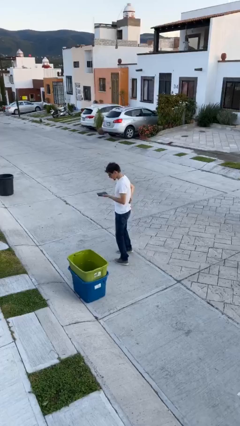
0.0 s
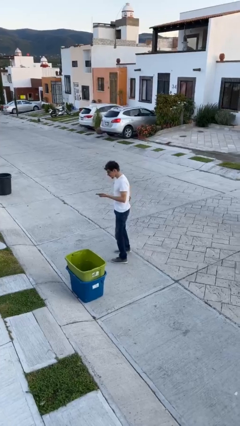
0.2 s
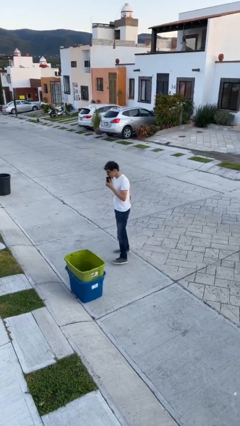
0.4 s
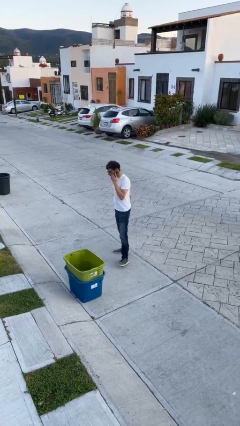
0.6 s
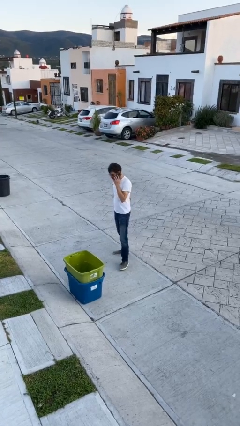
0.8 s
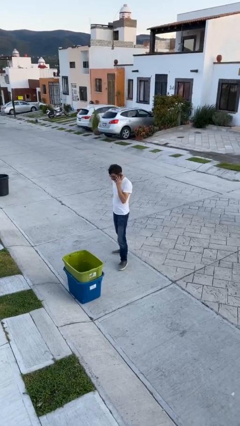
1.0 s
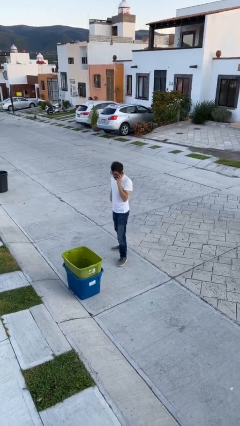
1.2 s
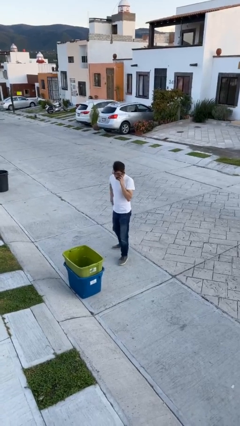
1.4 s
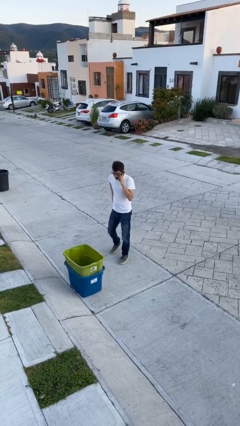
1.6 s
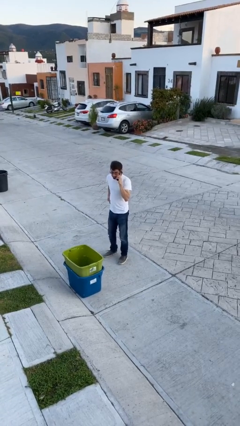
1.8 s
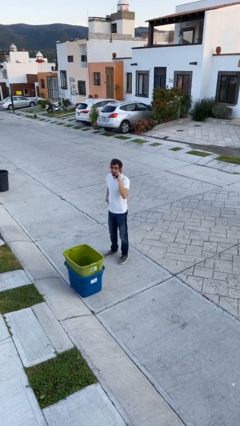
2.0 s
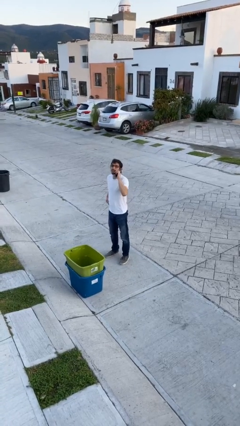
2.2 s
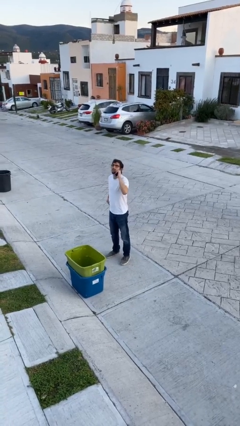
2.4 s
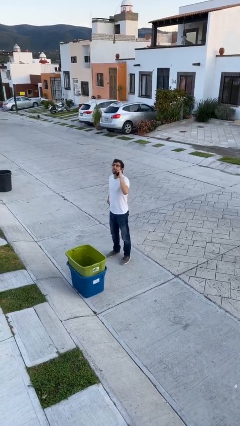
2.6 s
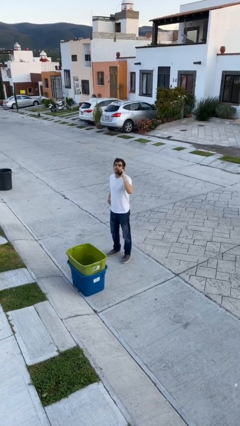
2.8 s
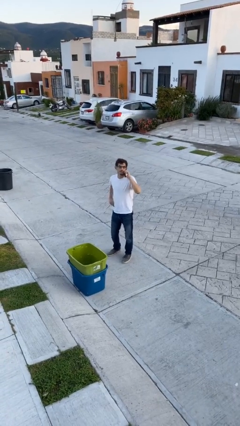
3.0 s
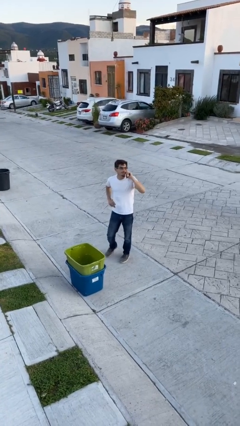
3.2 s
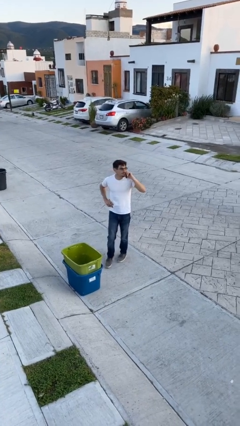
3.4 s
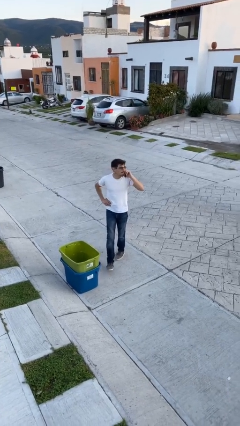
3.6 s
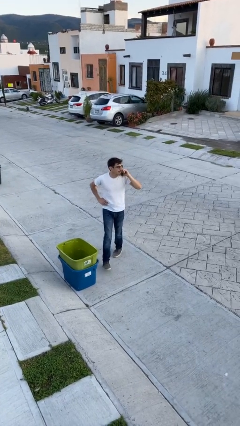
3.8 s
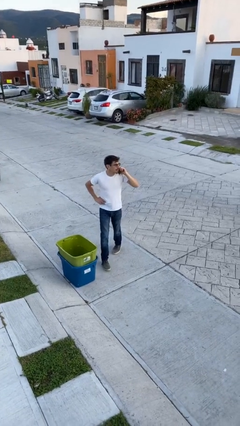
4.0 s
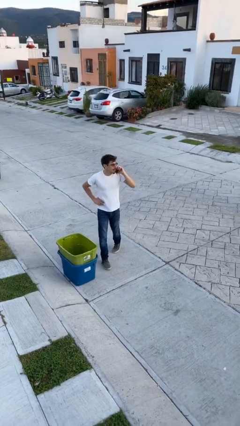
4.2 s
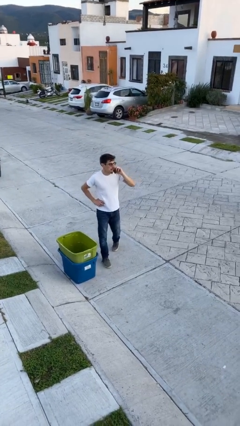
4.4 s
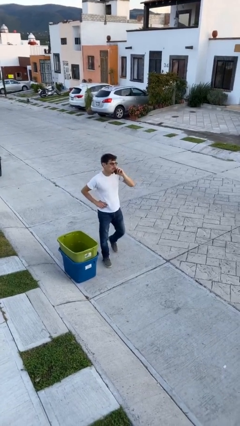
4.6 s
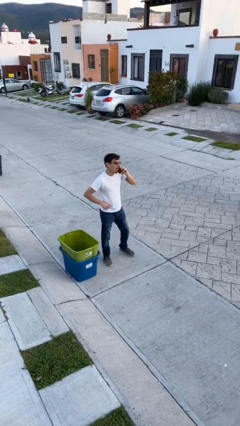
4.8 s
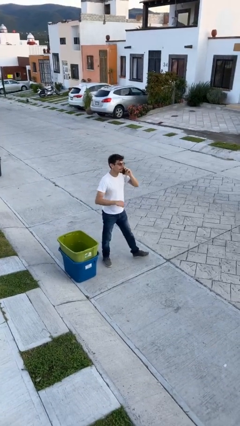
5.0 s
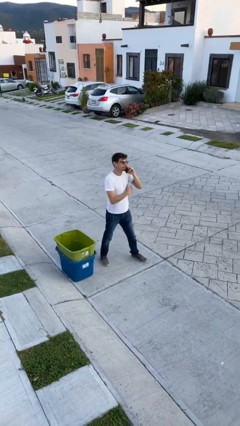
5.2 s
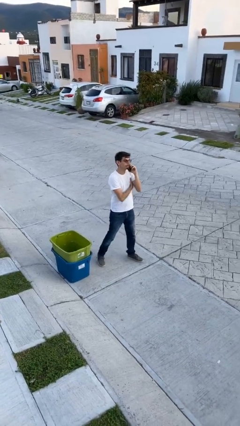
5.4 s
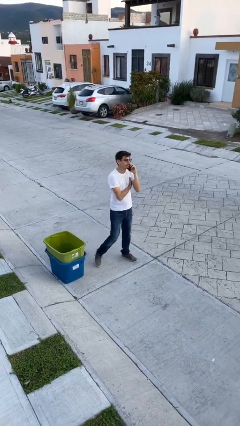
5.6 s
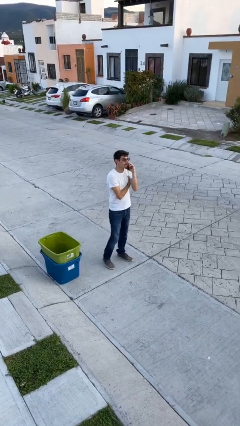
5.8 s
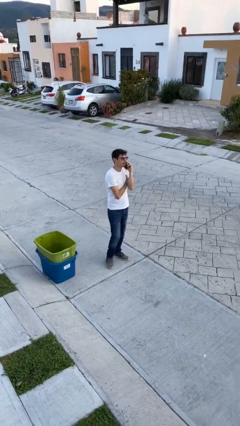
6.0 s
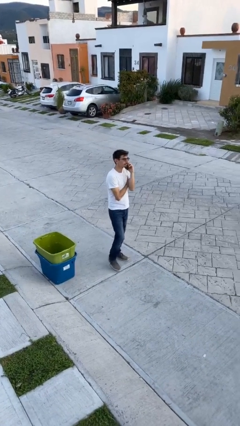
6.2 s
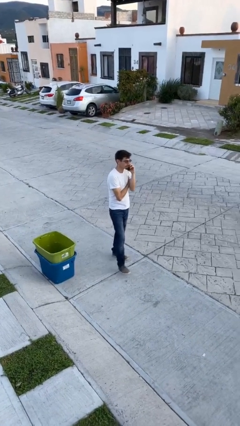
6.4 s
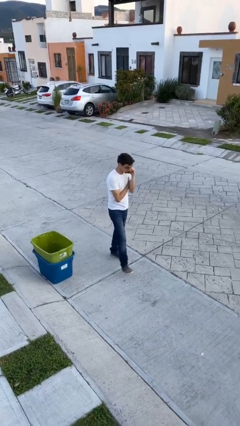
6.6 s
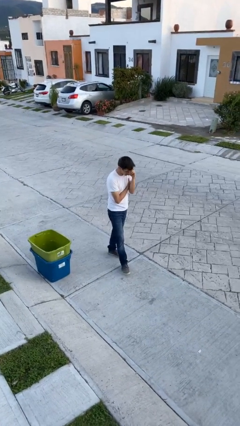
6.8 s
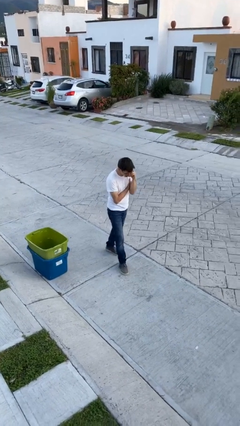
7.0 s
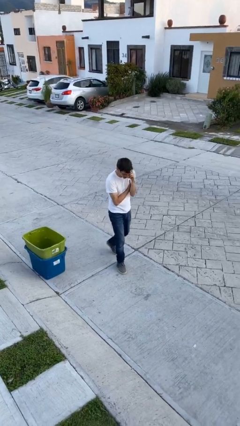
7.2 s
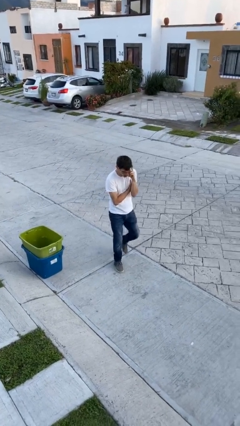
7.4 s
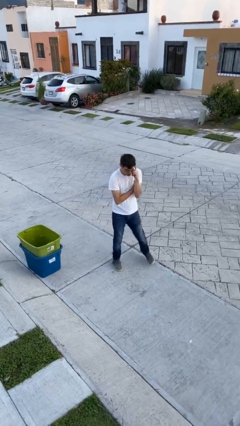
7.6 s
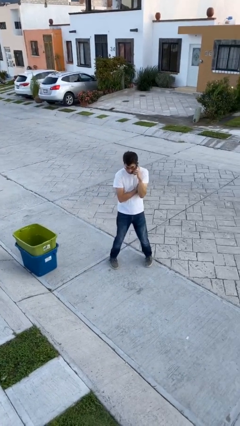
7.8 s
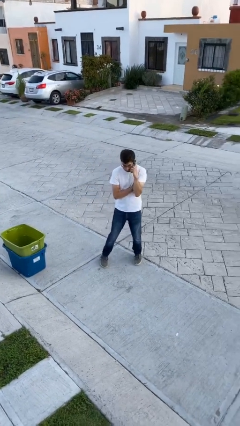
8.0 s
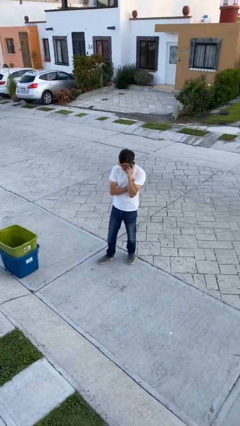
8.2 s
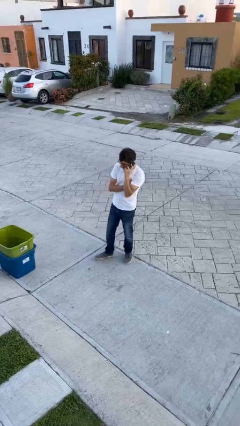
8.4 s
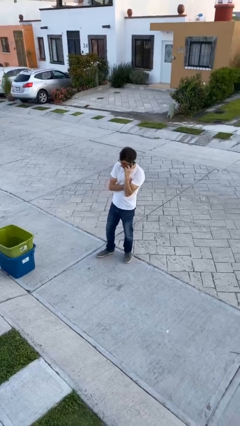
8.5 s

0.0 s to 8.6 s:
person talks on phone

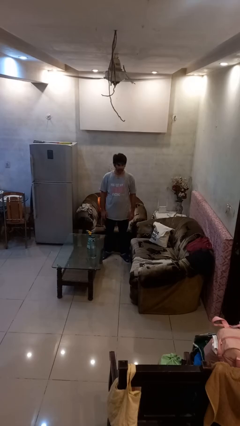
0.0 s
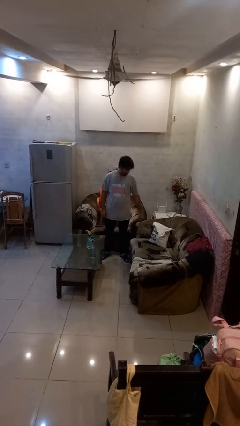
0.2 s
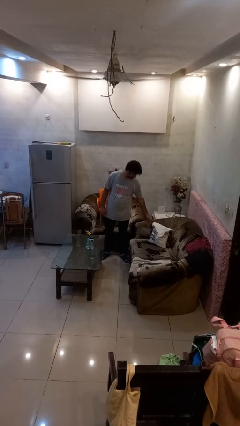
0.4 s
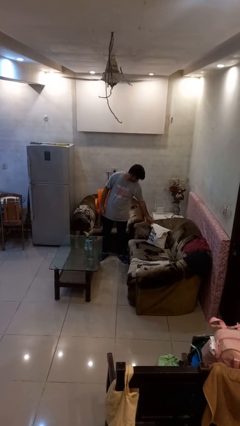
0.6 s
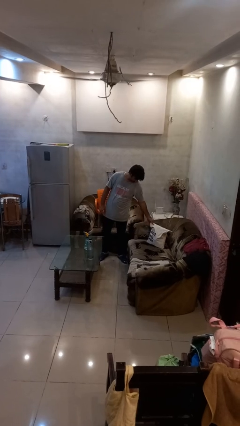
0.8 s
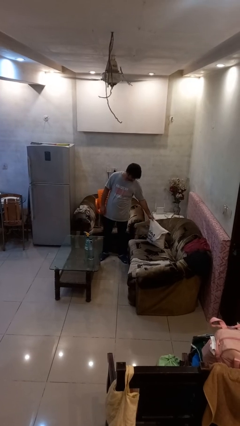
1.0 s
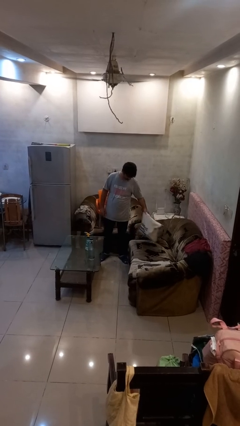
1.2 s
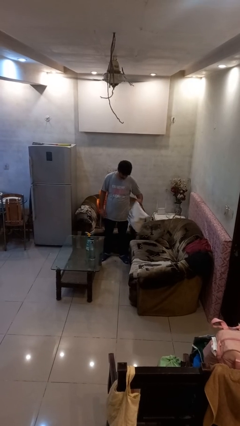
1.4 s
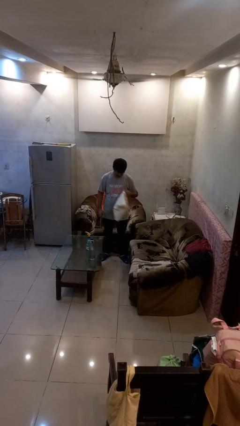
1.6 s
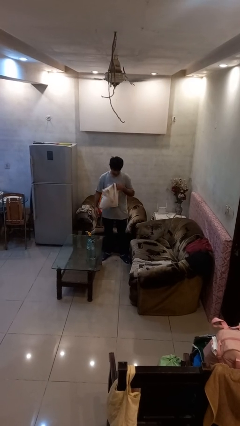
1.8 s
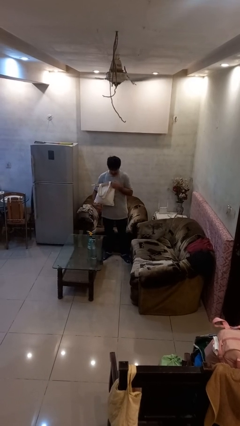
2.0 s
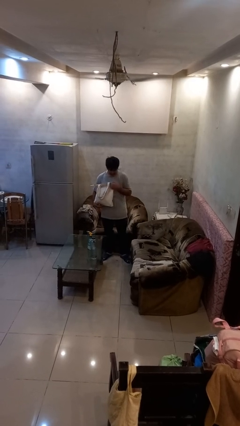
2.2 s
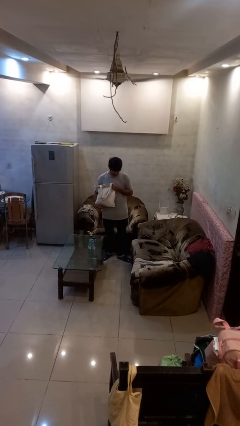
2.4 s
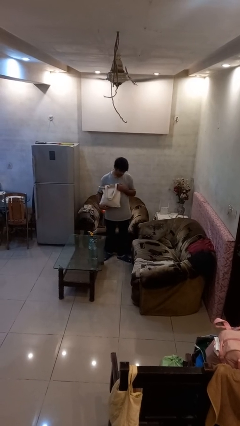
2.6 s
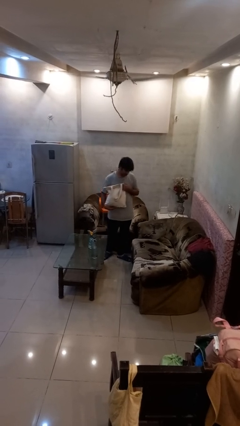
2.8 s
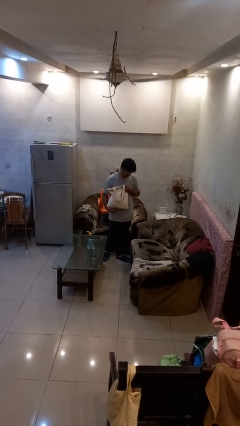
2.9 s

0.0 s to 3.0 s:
person picks up object from couch

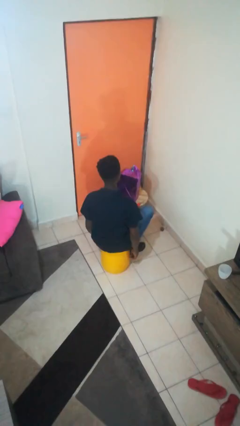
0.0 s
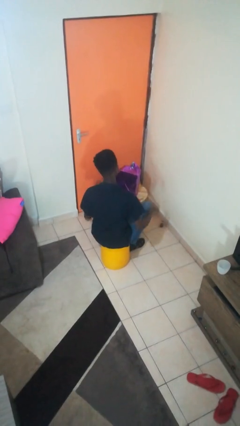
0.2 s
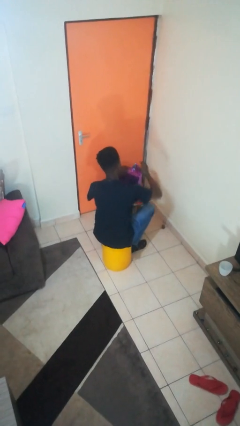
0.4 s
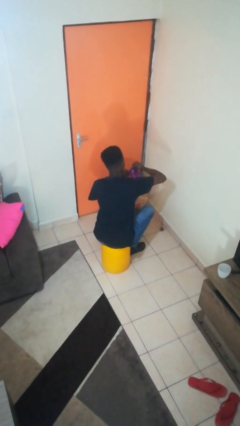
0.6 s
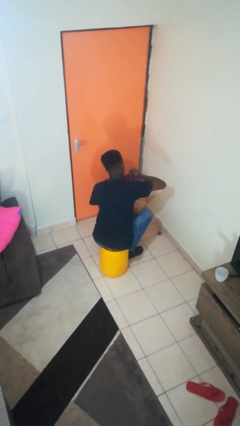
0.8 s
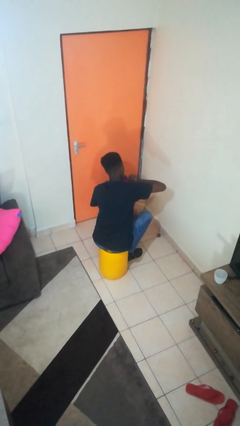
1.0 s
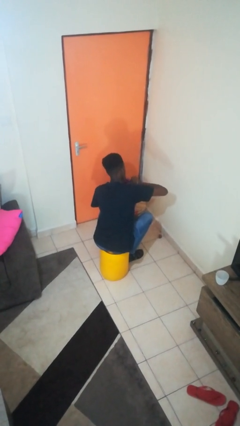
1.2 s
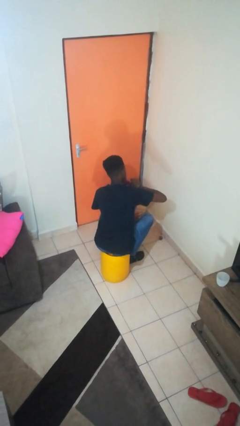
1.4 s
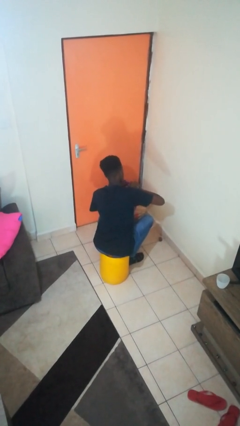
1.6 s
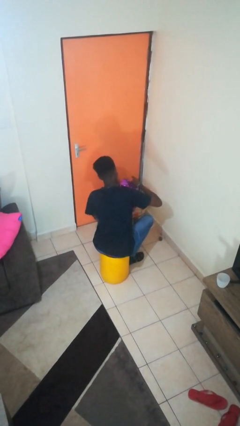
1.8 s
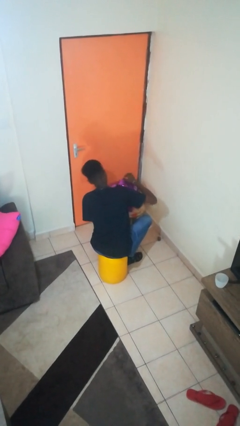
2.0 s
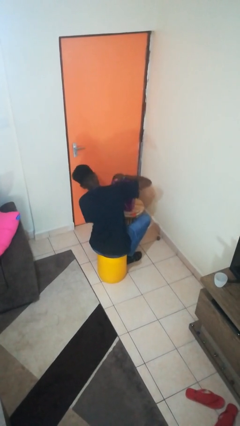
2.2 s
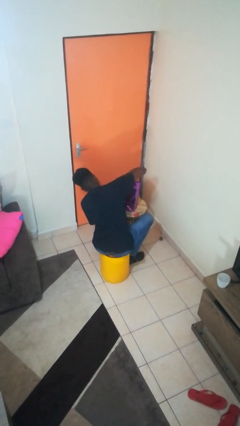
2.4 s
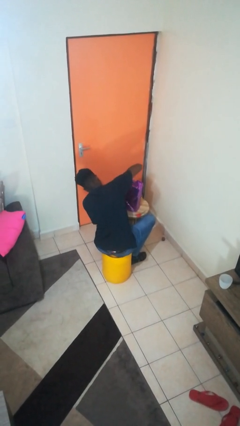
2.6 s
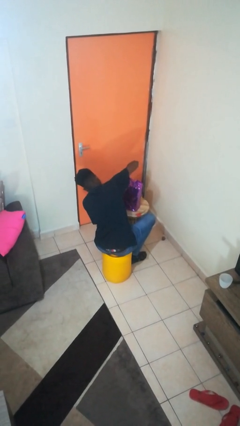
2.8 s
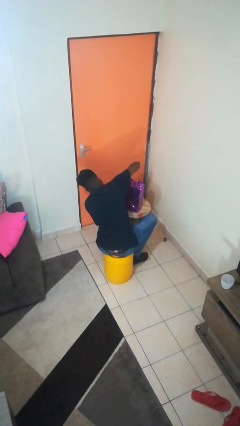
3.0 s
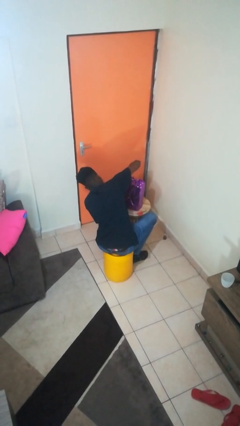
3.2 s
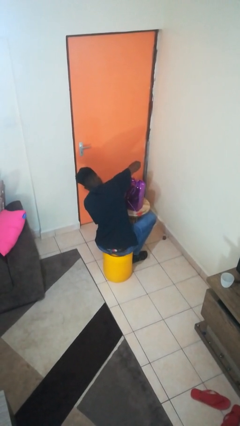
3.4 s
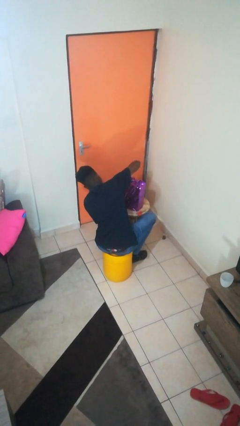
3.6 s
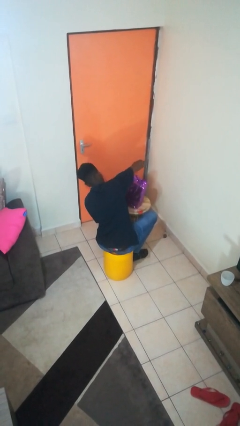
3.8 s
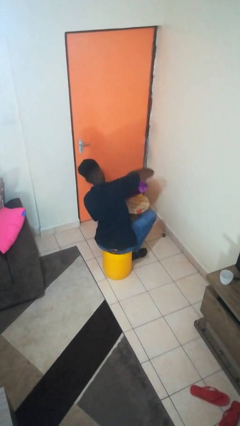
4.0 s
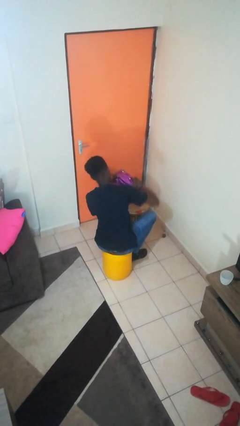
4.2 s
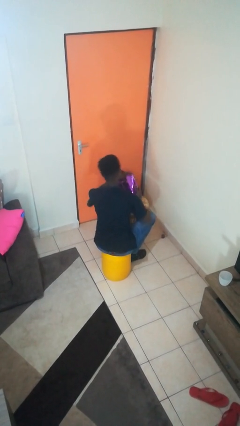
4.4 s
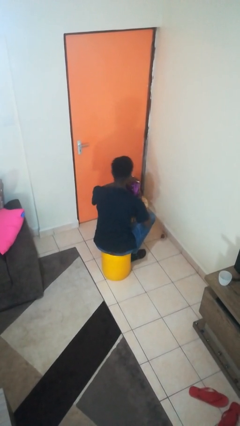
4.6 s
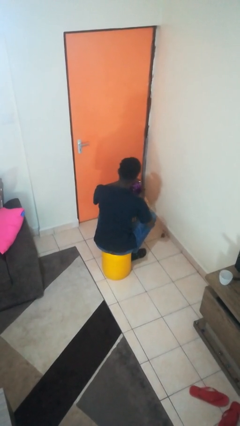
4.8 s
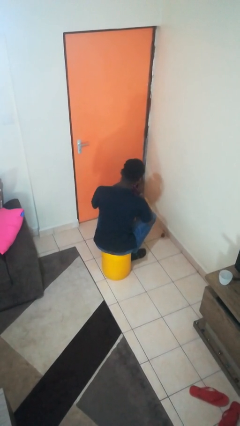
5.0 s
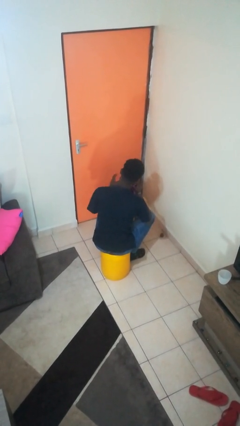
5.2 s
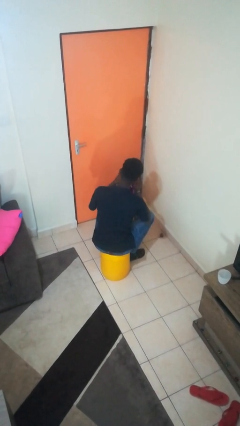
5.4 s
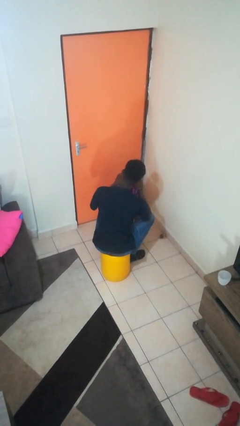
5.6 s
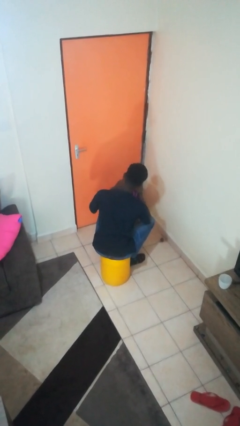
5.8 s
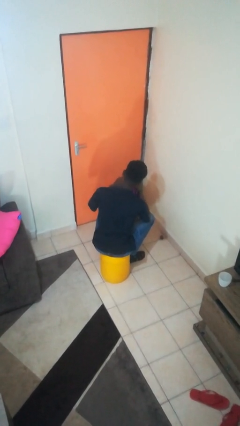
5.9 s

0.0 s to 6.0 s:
person wraps box

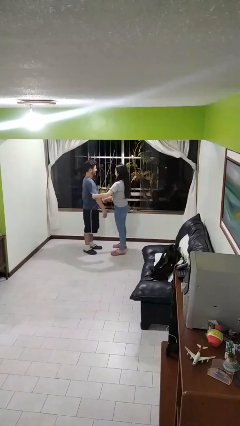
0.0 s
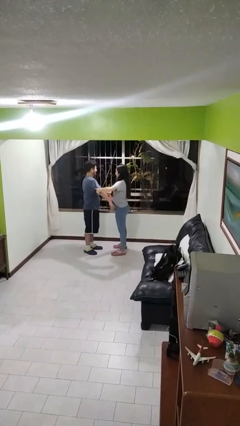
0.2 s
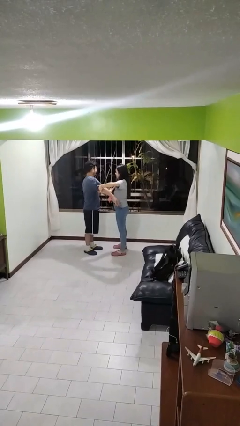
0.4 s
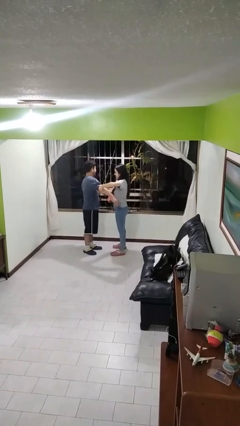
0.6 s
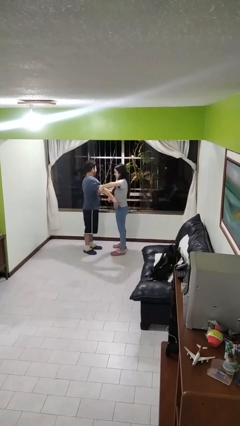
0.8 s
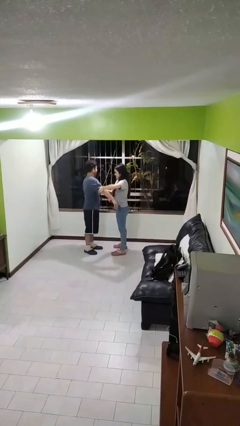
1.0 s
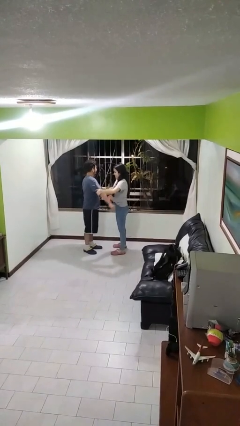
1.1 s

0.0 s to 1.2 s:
person grabs person by bicep
